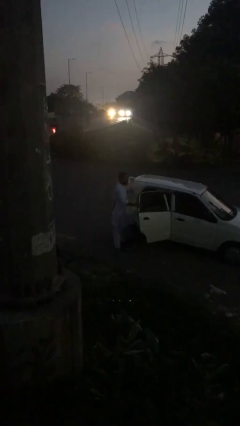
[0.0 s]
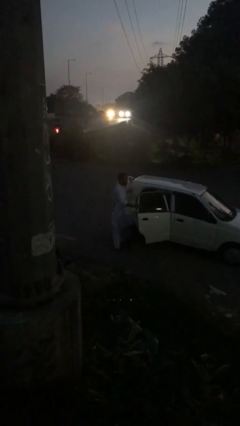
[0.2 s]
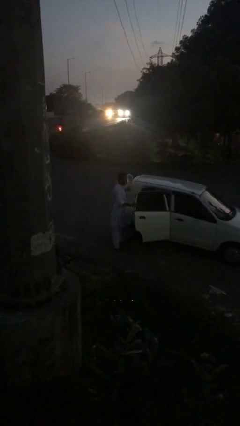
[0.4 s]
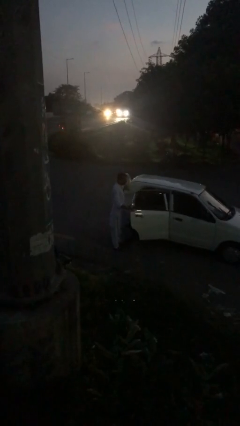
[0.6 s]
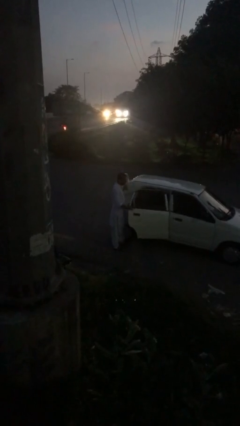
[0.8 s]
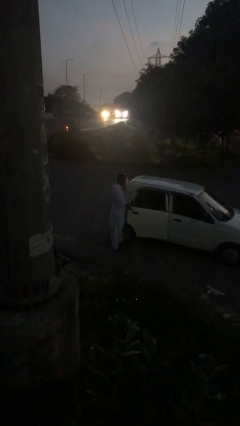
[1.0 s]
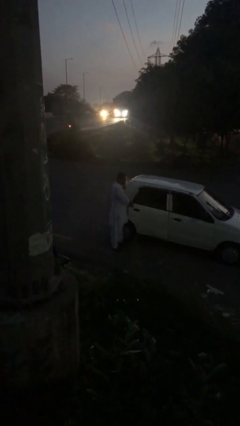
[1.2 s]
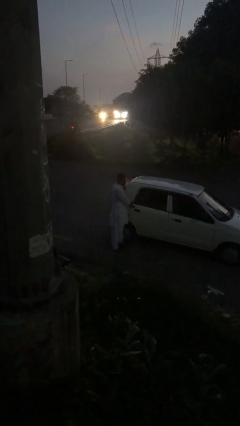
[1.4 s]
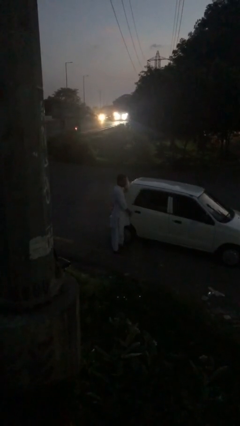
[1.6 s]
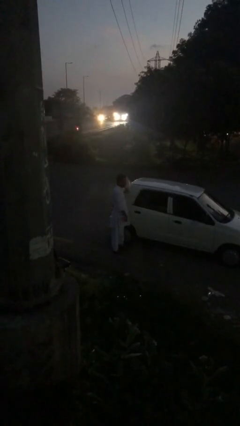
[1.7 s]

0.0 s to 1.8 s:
person closes car door

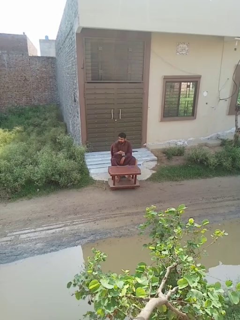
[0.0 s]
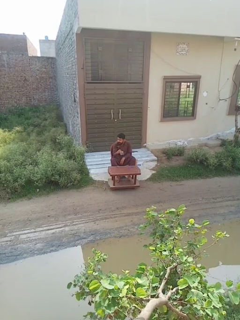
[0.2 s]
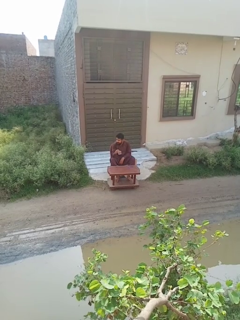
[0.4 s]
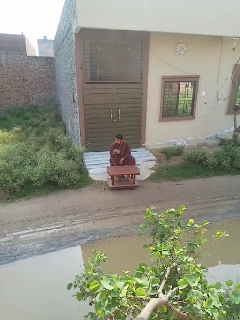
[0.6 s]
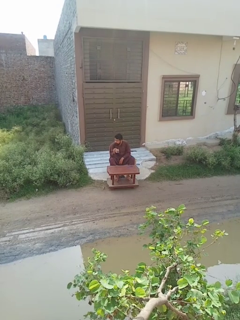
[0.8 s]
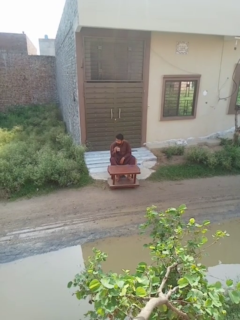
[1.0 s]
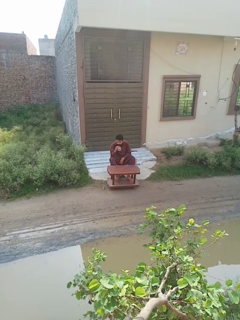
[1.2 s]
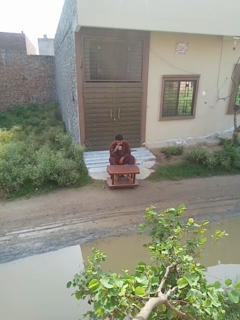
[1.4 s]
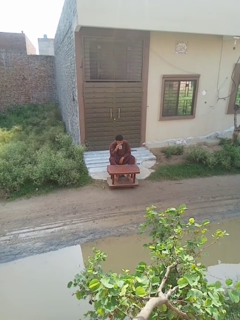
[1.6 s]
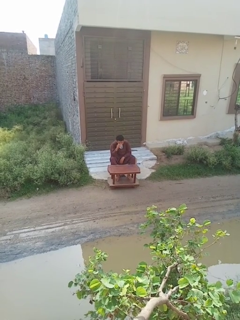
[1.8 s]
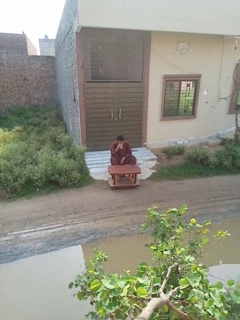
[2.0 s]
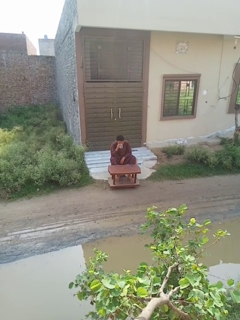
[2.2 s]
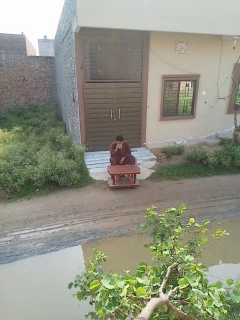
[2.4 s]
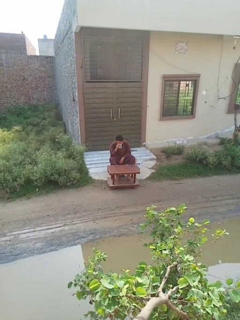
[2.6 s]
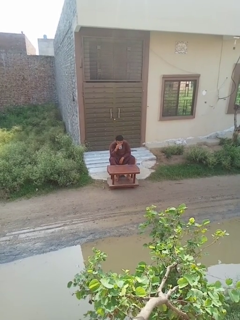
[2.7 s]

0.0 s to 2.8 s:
person drinks from mug

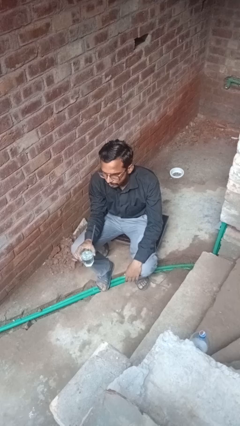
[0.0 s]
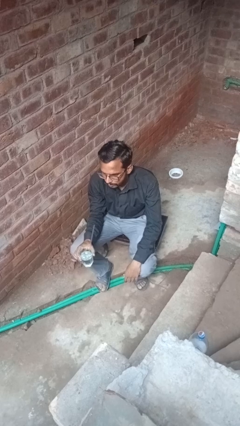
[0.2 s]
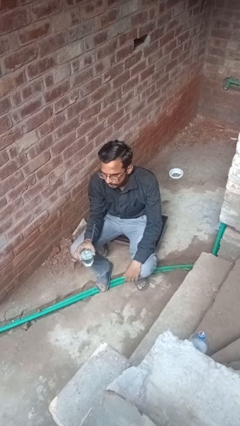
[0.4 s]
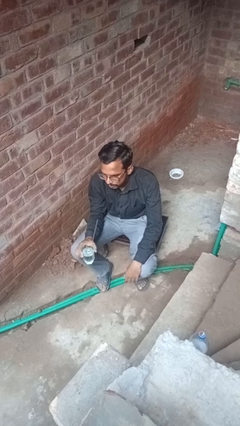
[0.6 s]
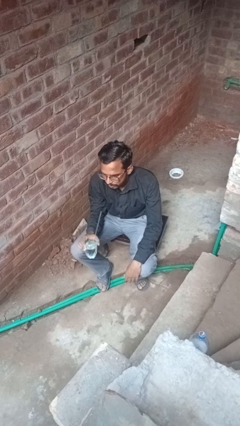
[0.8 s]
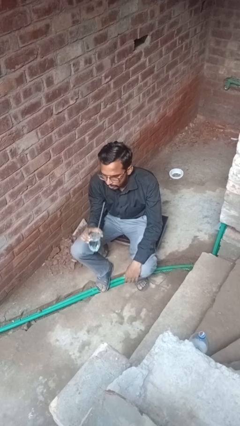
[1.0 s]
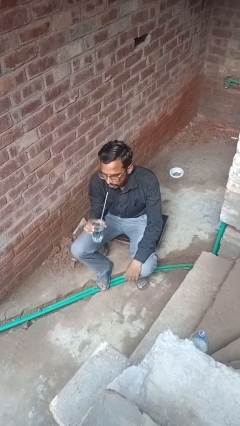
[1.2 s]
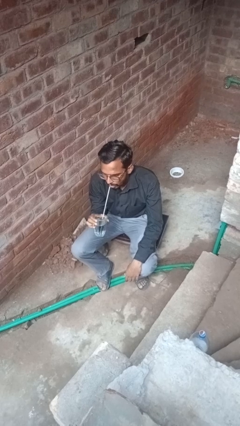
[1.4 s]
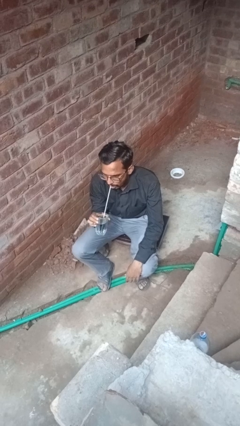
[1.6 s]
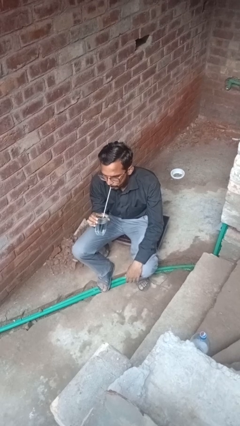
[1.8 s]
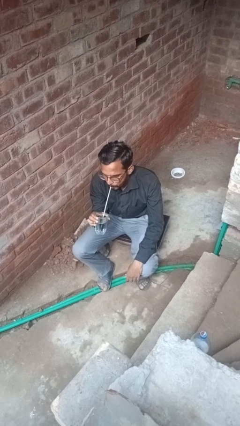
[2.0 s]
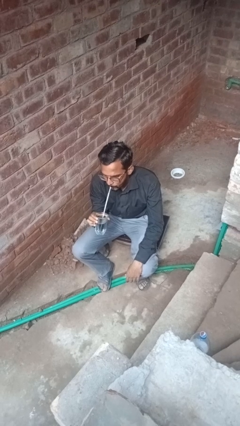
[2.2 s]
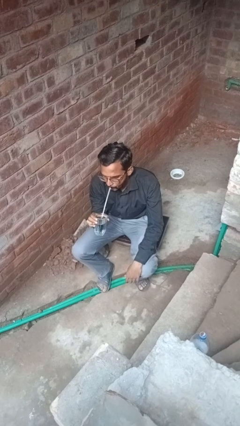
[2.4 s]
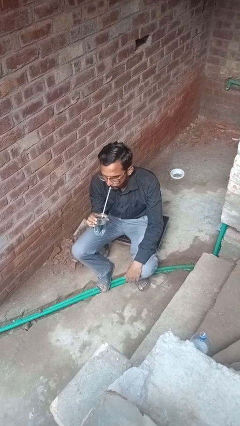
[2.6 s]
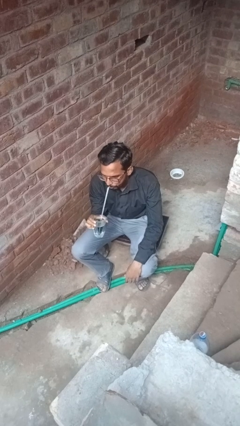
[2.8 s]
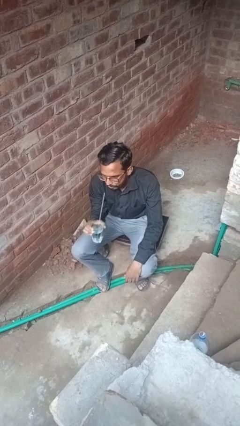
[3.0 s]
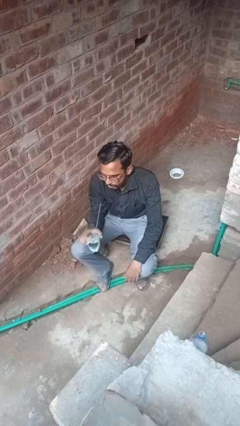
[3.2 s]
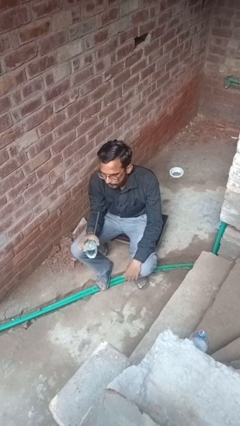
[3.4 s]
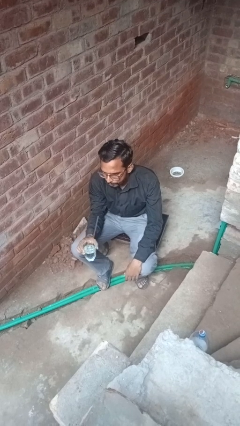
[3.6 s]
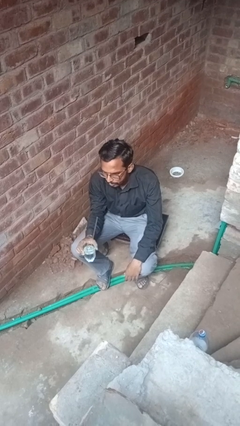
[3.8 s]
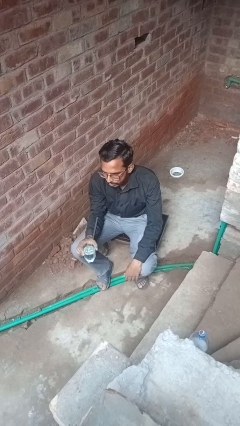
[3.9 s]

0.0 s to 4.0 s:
person drinks from straw

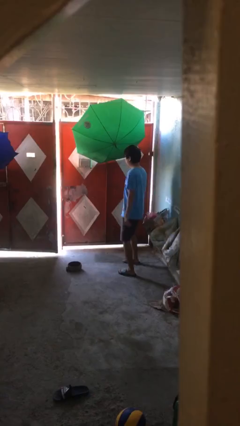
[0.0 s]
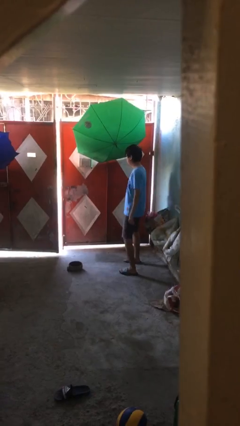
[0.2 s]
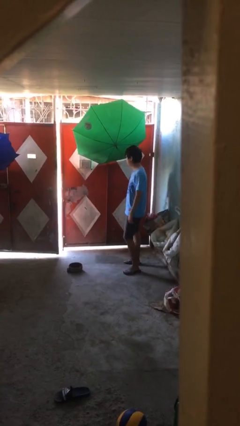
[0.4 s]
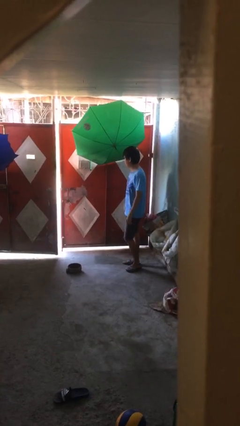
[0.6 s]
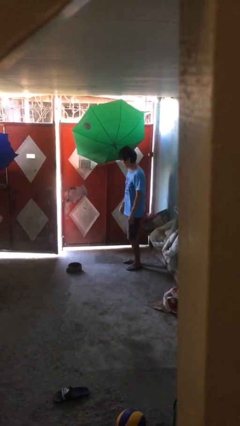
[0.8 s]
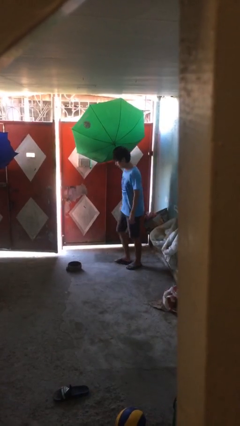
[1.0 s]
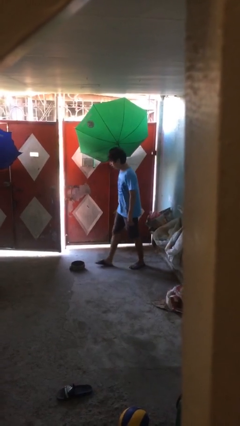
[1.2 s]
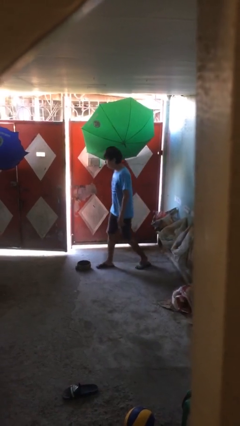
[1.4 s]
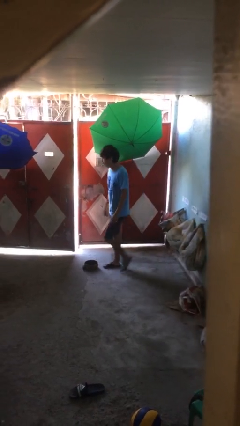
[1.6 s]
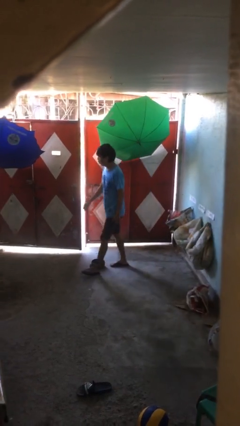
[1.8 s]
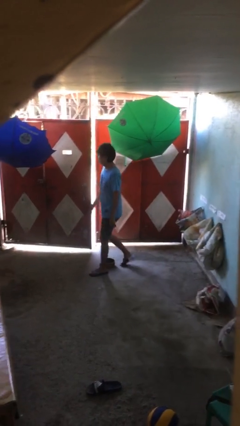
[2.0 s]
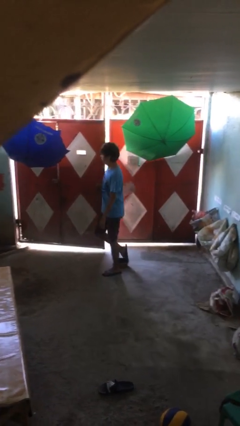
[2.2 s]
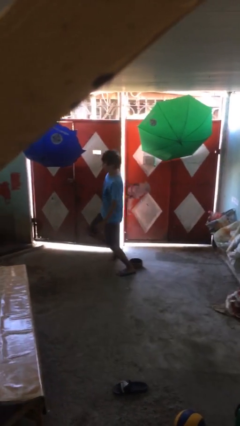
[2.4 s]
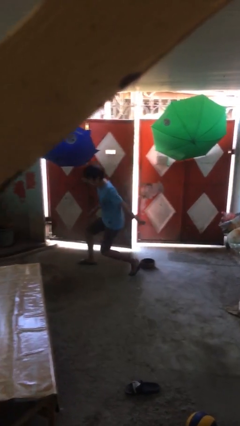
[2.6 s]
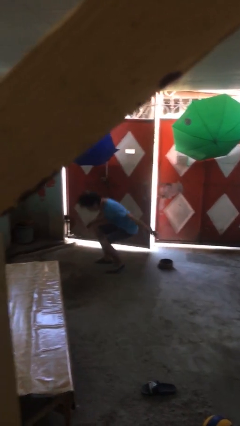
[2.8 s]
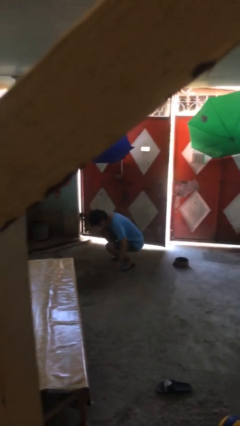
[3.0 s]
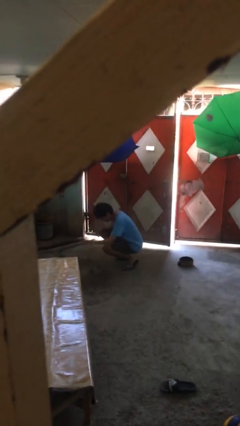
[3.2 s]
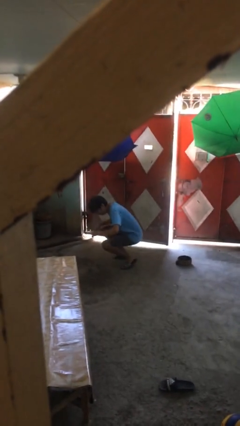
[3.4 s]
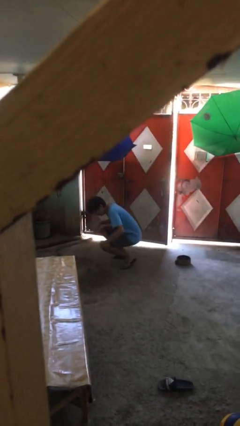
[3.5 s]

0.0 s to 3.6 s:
person trips on object on floor

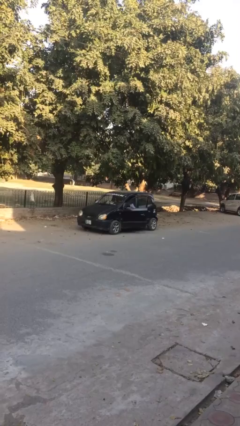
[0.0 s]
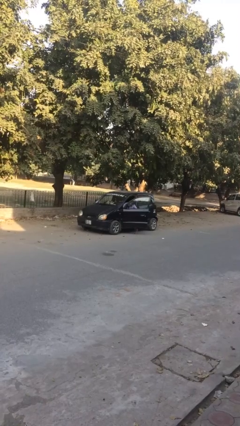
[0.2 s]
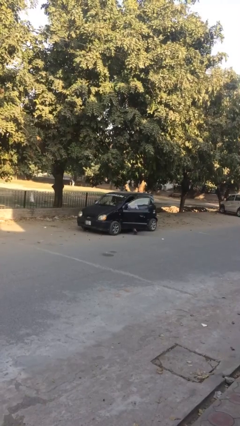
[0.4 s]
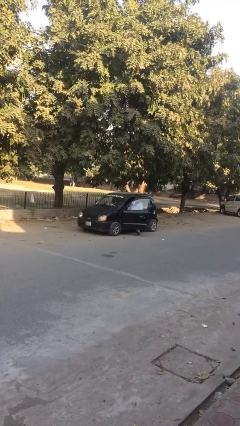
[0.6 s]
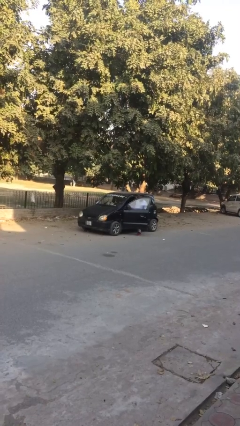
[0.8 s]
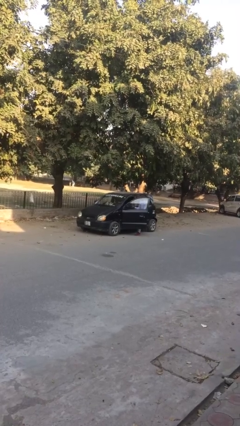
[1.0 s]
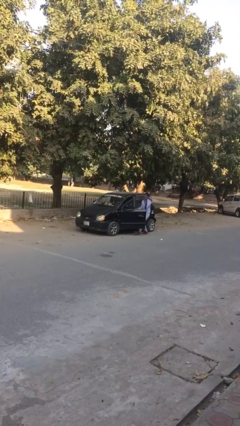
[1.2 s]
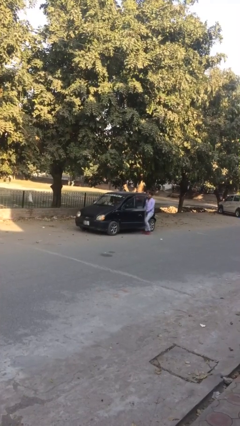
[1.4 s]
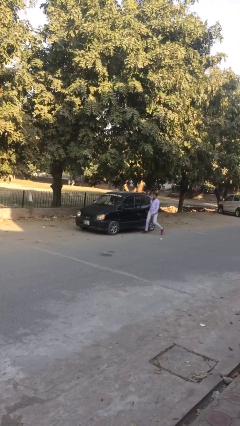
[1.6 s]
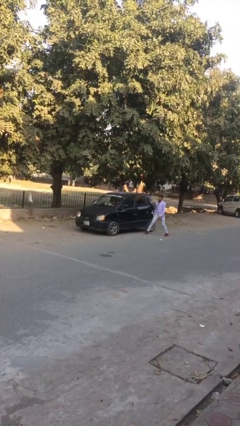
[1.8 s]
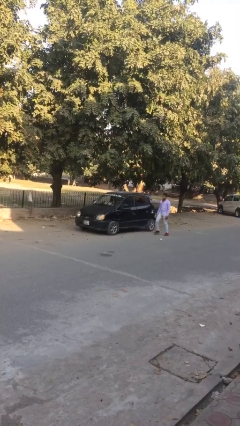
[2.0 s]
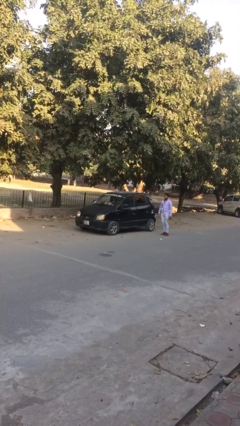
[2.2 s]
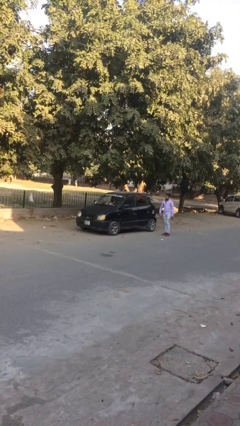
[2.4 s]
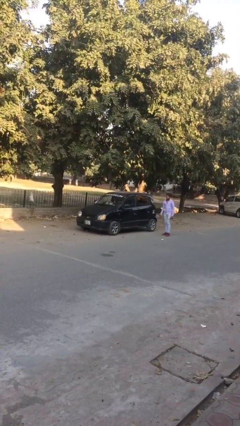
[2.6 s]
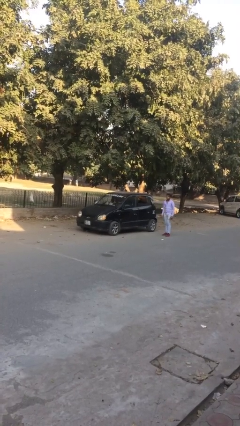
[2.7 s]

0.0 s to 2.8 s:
car drops off person

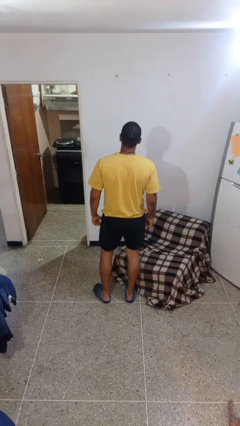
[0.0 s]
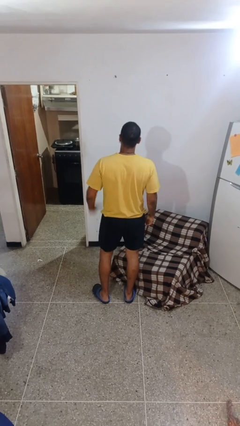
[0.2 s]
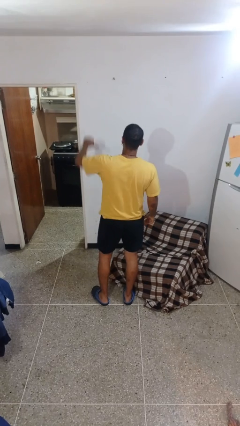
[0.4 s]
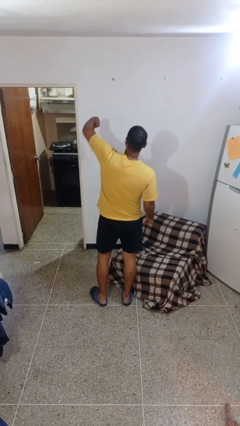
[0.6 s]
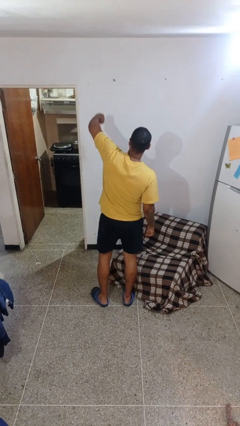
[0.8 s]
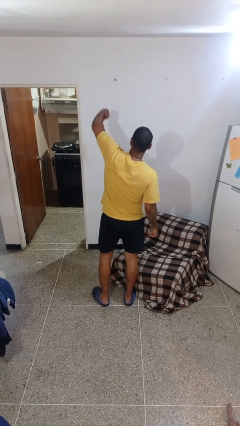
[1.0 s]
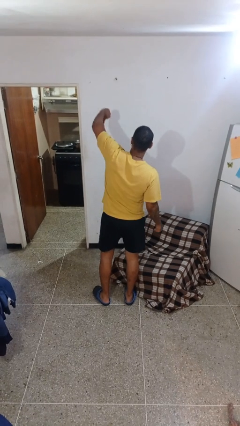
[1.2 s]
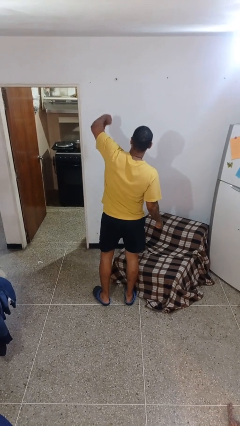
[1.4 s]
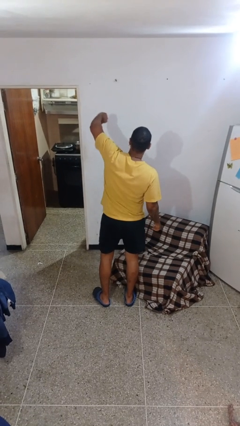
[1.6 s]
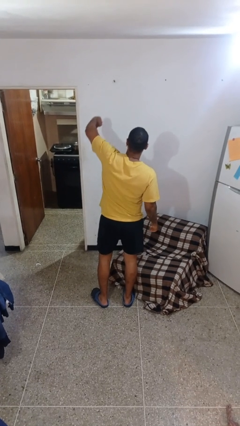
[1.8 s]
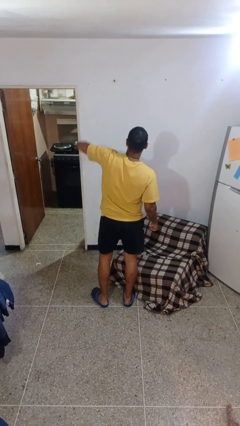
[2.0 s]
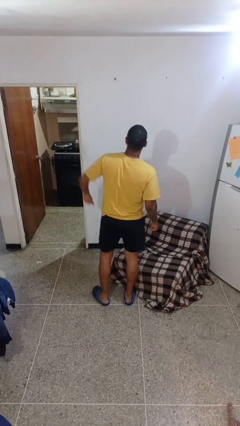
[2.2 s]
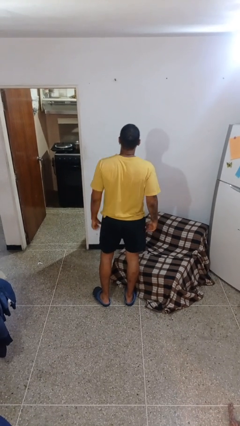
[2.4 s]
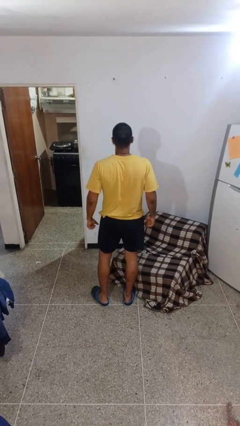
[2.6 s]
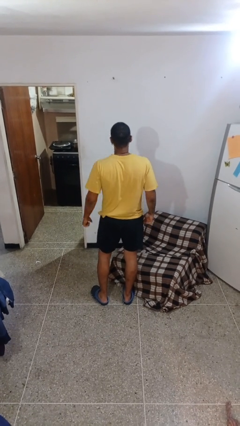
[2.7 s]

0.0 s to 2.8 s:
person gestures thumbs down

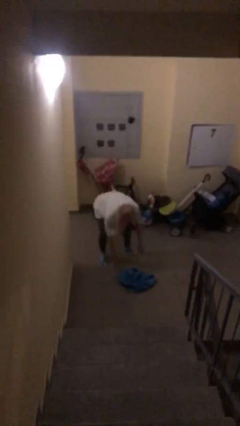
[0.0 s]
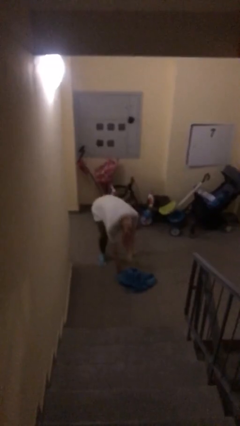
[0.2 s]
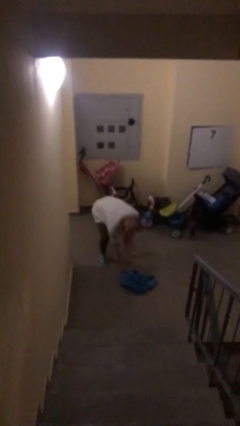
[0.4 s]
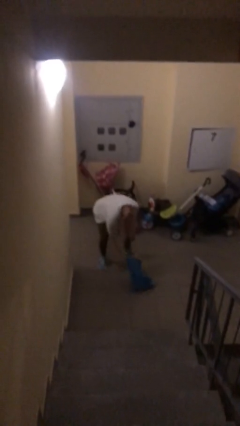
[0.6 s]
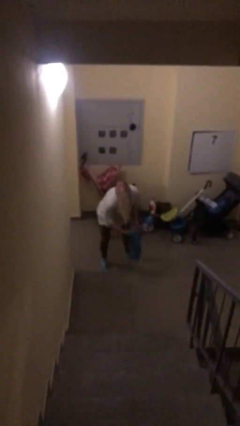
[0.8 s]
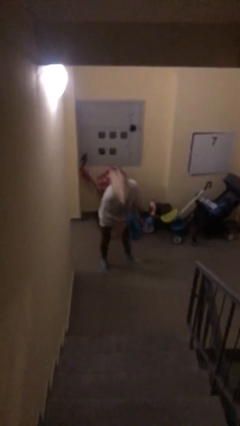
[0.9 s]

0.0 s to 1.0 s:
person picks up object from floor
